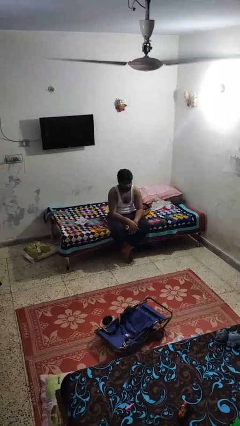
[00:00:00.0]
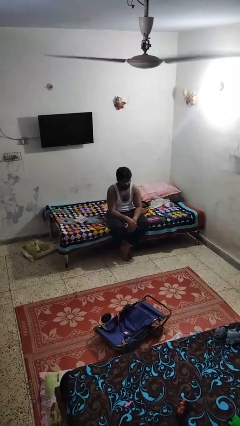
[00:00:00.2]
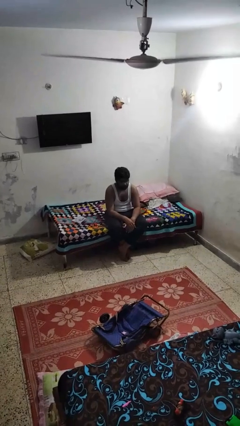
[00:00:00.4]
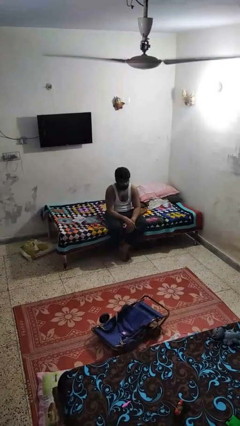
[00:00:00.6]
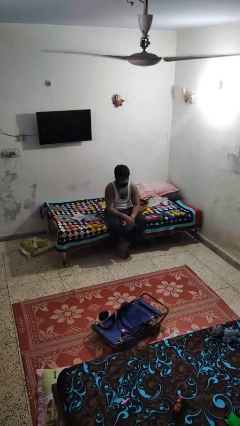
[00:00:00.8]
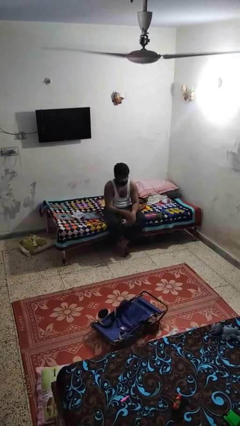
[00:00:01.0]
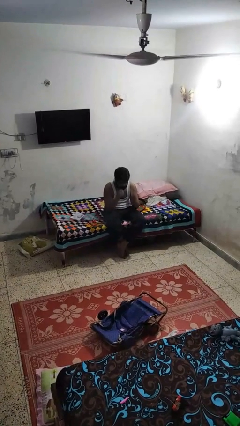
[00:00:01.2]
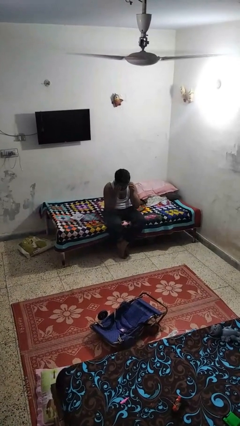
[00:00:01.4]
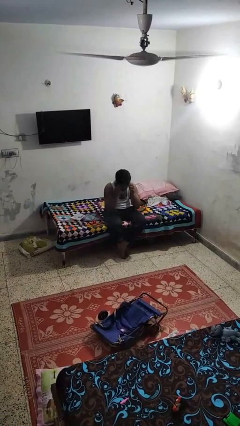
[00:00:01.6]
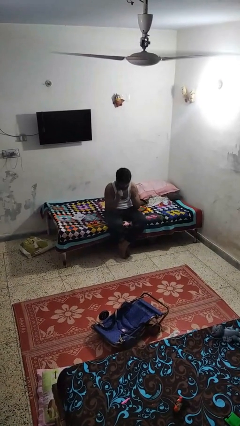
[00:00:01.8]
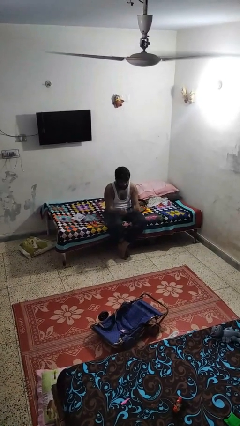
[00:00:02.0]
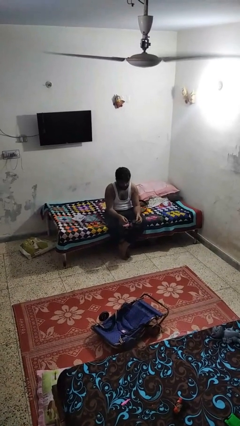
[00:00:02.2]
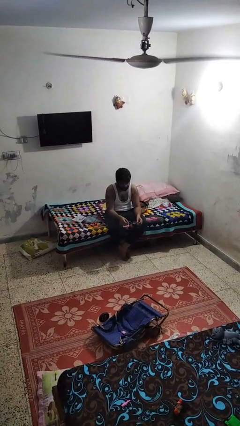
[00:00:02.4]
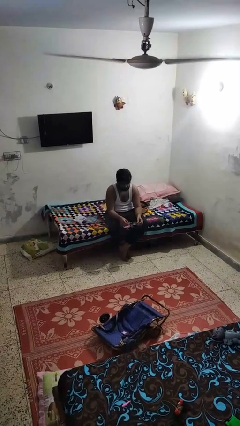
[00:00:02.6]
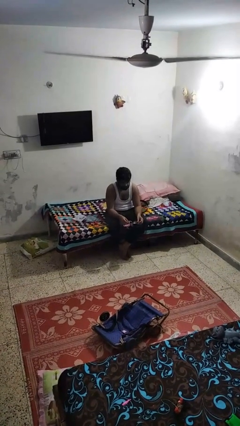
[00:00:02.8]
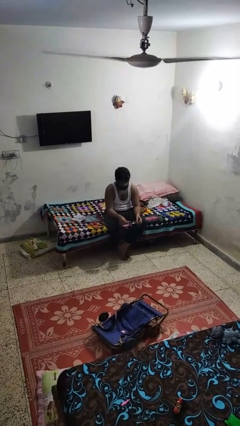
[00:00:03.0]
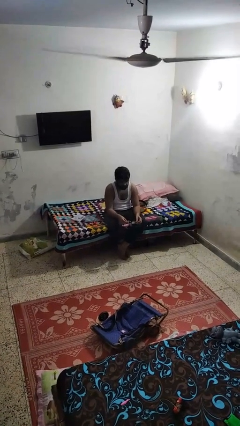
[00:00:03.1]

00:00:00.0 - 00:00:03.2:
person takes off glasses

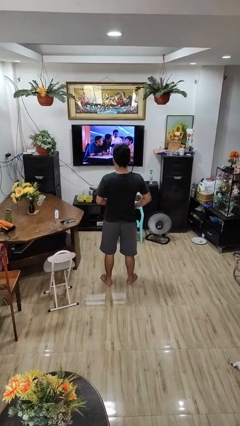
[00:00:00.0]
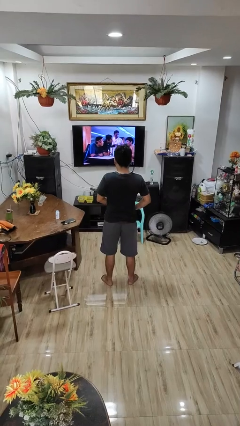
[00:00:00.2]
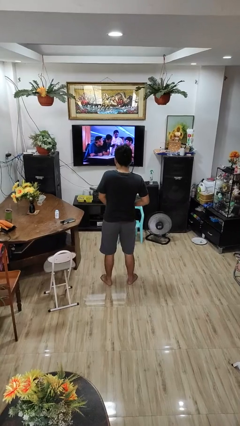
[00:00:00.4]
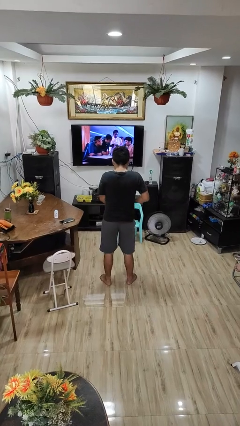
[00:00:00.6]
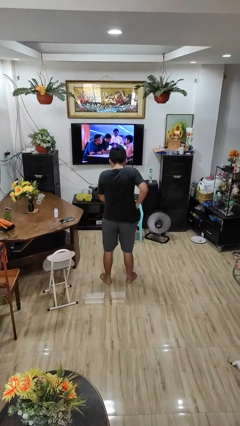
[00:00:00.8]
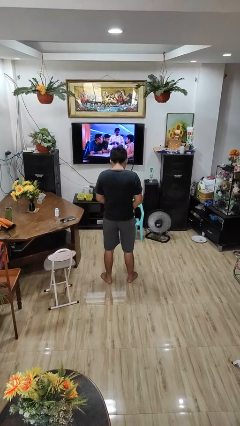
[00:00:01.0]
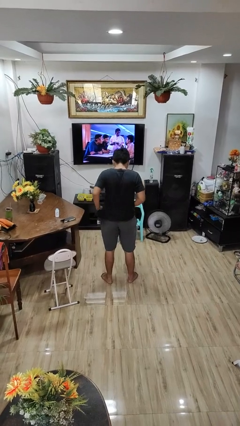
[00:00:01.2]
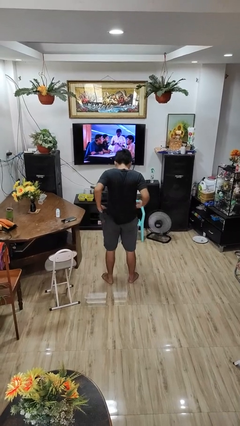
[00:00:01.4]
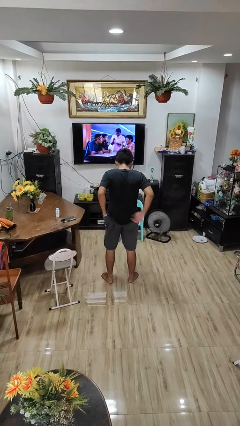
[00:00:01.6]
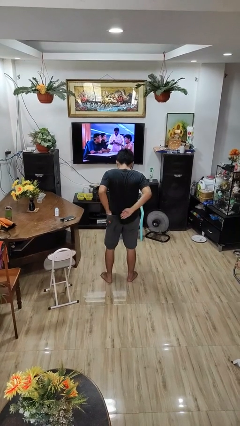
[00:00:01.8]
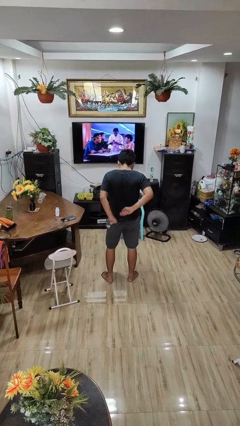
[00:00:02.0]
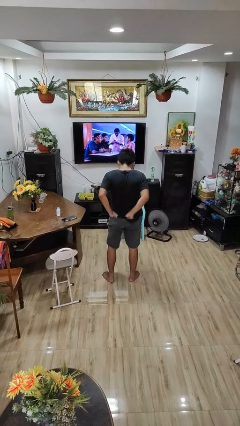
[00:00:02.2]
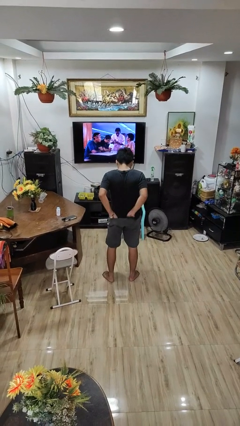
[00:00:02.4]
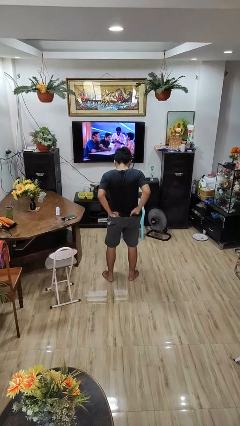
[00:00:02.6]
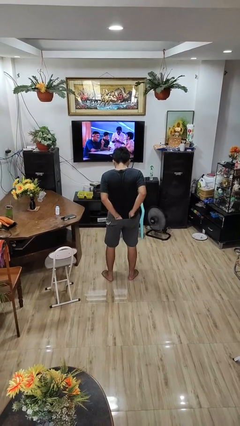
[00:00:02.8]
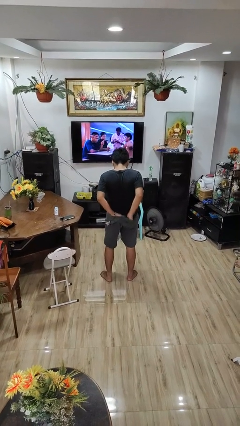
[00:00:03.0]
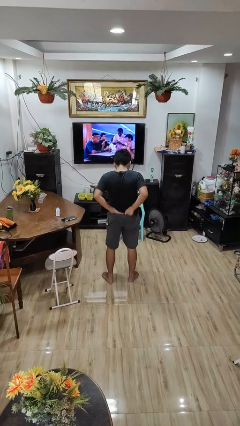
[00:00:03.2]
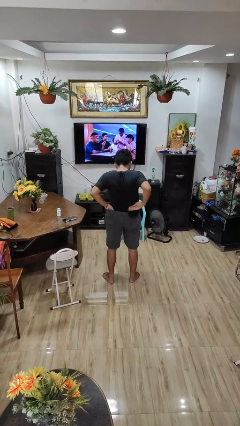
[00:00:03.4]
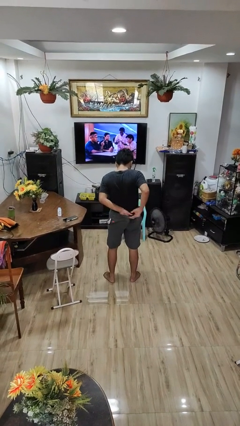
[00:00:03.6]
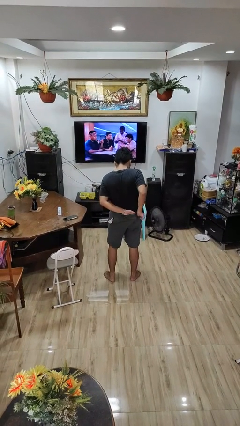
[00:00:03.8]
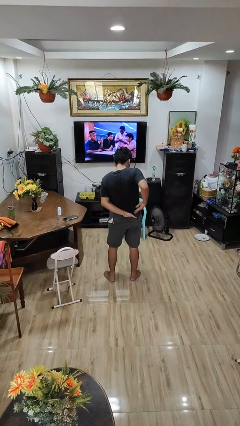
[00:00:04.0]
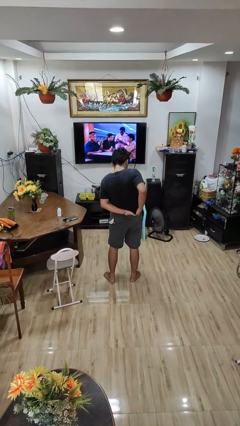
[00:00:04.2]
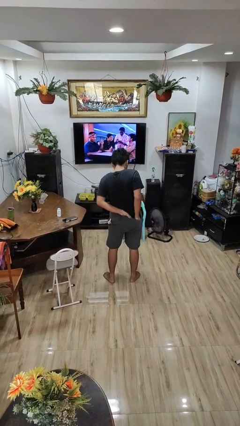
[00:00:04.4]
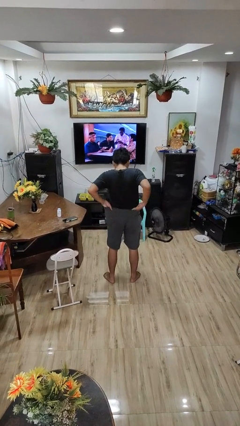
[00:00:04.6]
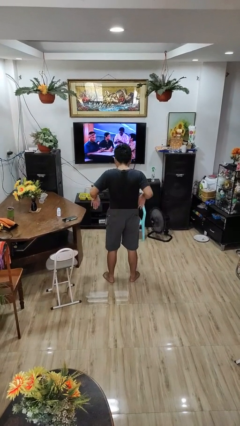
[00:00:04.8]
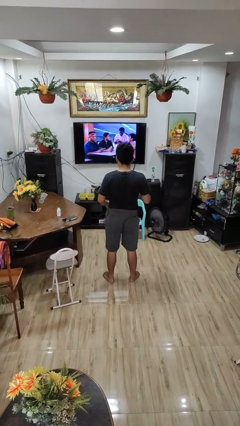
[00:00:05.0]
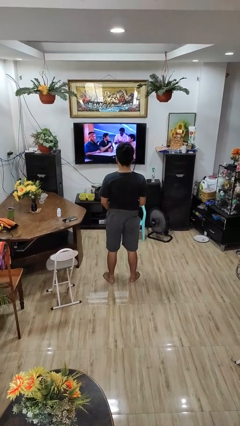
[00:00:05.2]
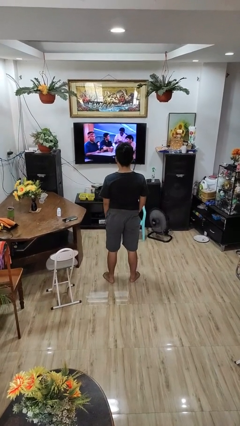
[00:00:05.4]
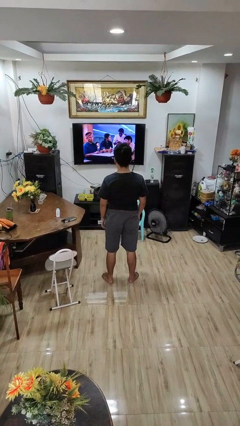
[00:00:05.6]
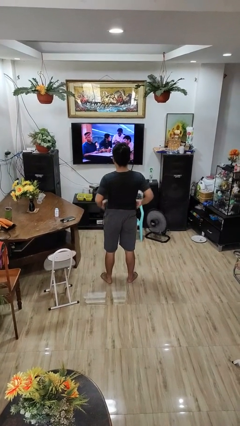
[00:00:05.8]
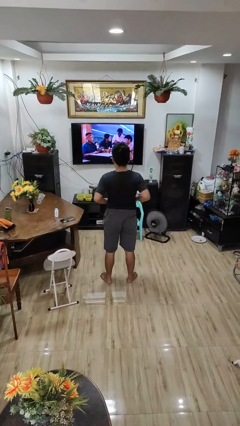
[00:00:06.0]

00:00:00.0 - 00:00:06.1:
person tucks in shirt

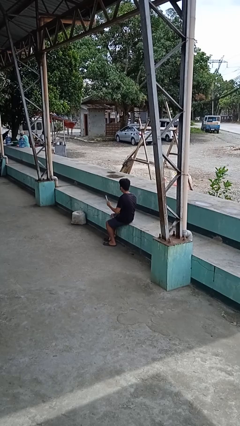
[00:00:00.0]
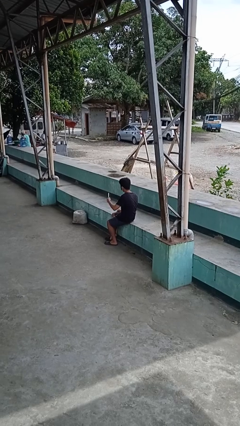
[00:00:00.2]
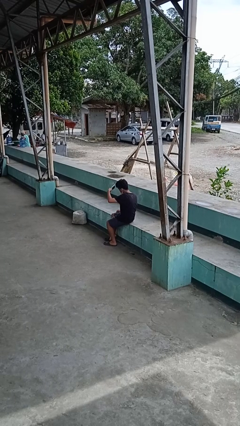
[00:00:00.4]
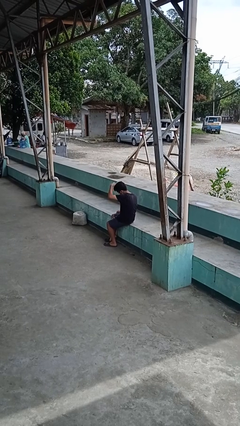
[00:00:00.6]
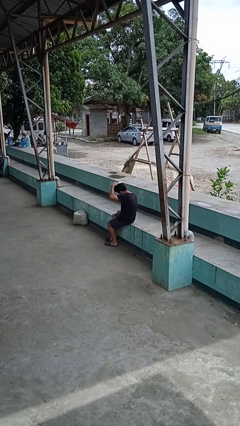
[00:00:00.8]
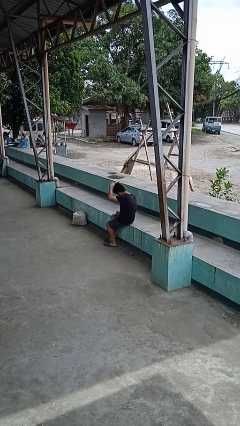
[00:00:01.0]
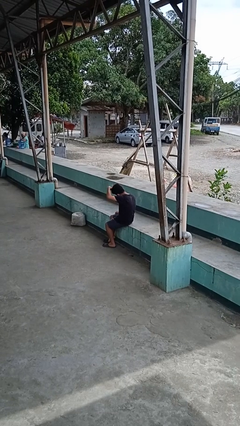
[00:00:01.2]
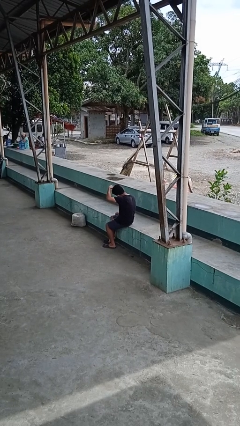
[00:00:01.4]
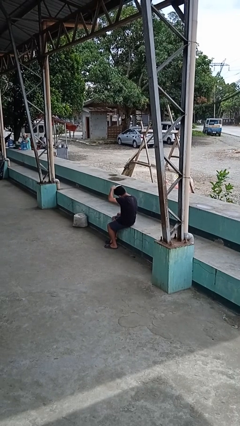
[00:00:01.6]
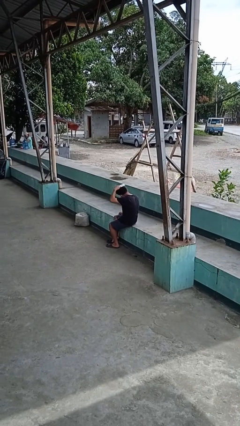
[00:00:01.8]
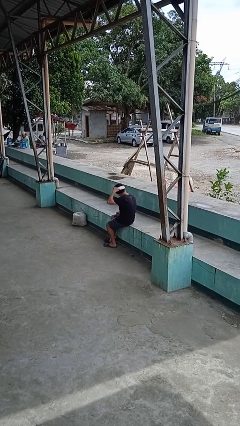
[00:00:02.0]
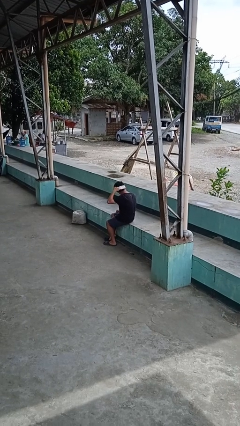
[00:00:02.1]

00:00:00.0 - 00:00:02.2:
person brushes hair

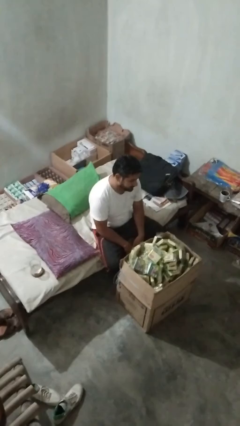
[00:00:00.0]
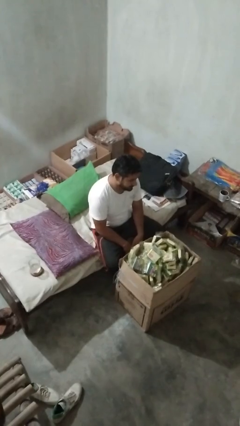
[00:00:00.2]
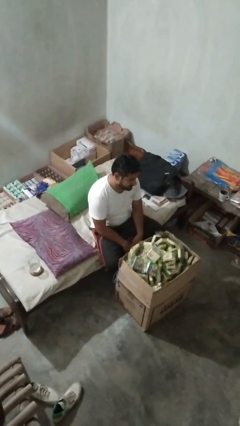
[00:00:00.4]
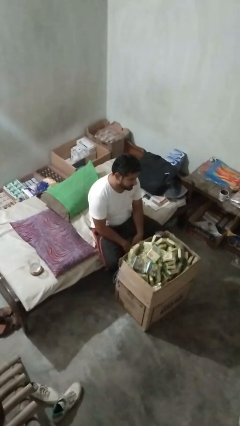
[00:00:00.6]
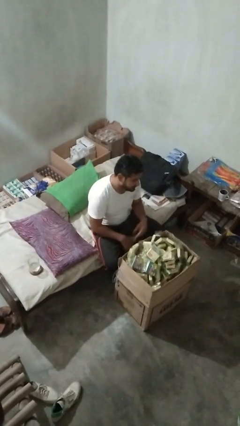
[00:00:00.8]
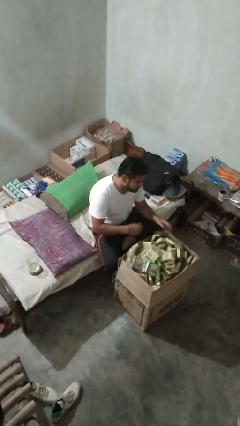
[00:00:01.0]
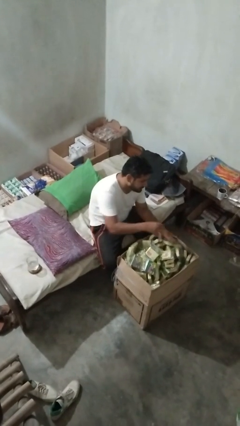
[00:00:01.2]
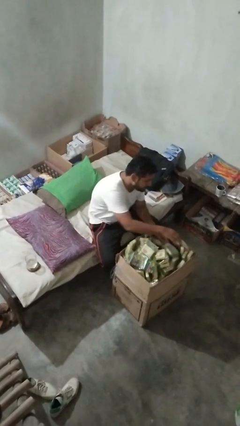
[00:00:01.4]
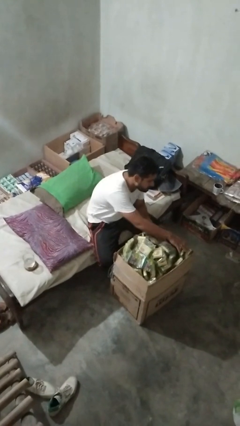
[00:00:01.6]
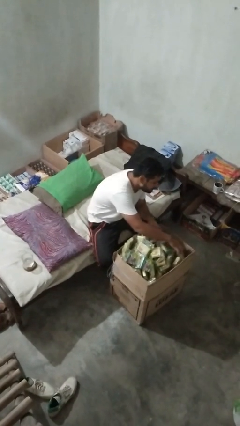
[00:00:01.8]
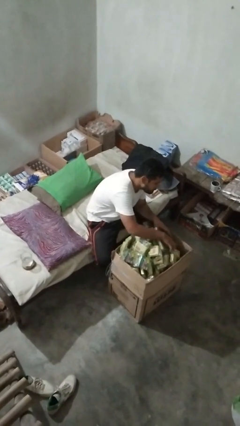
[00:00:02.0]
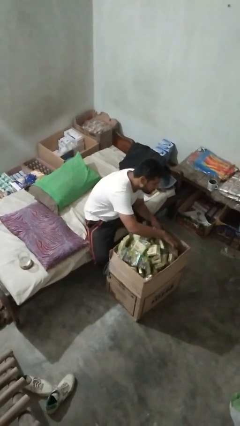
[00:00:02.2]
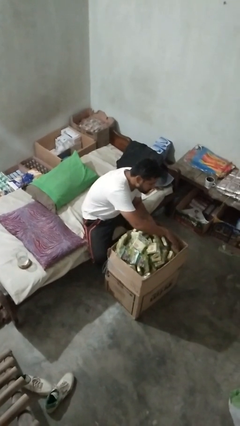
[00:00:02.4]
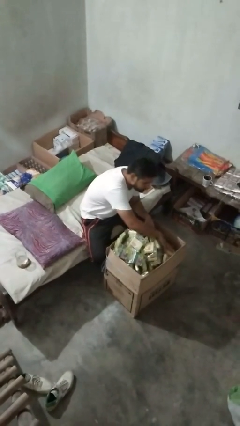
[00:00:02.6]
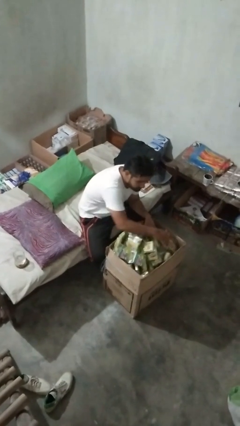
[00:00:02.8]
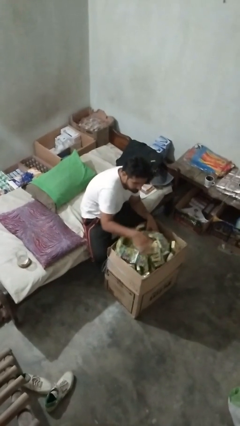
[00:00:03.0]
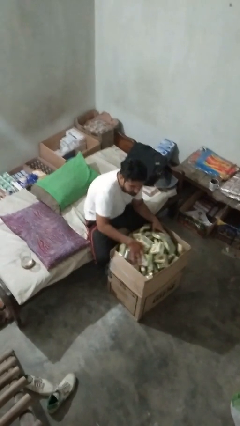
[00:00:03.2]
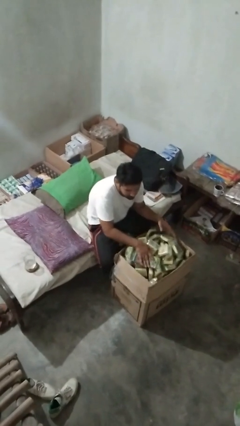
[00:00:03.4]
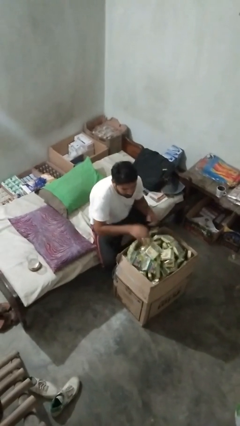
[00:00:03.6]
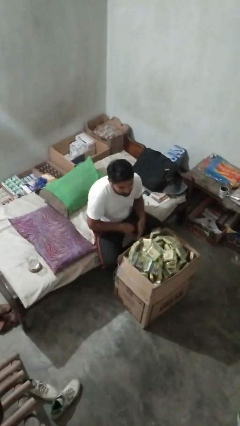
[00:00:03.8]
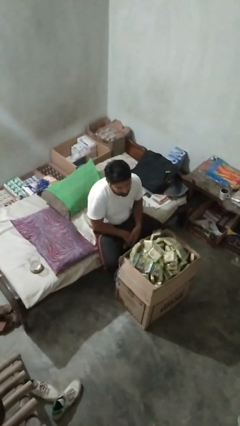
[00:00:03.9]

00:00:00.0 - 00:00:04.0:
person searches in box

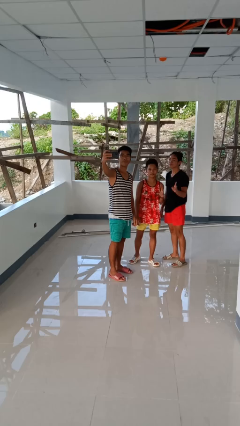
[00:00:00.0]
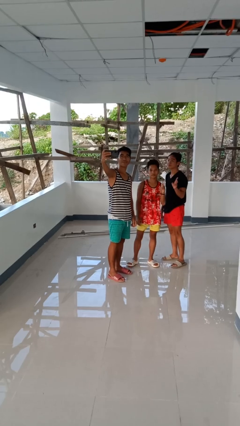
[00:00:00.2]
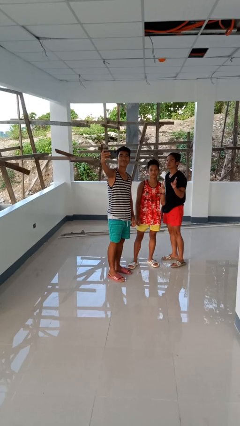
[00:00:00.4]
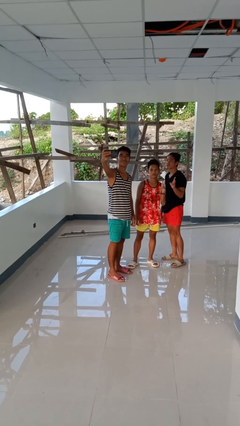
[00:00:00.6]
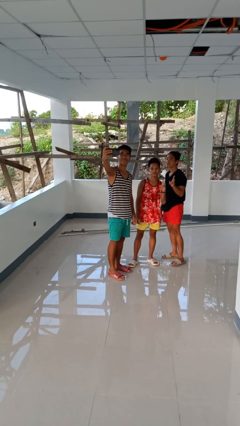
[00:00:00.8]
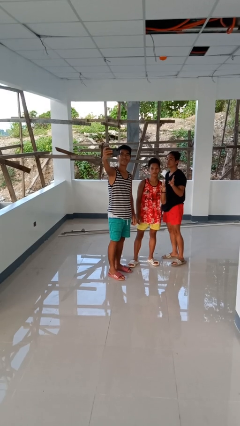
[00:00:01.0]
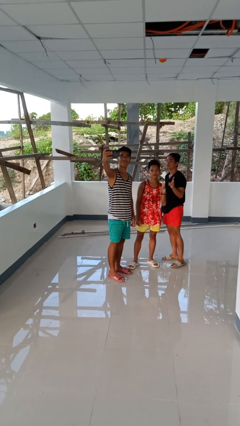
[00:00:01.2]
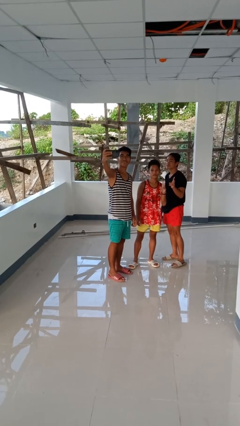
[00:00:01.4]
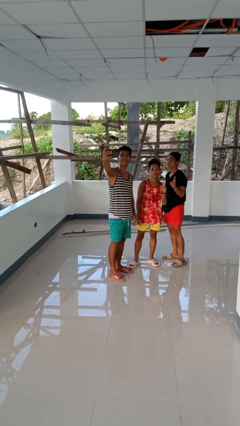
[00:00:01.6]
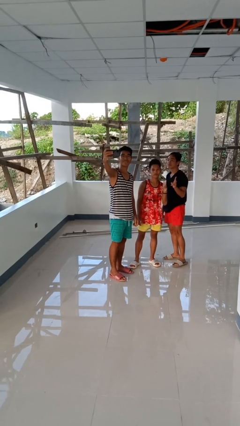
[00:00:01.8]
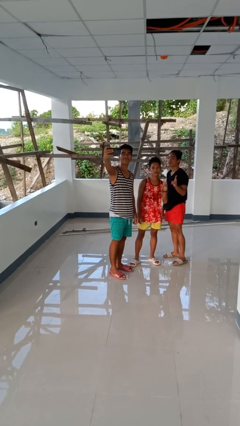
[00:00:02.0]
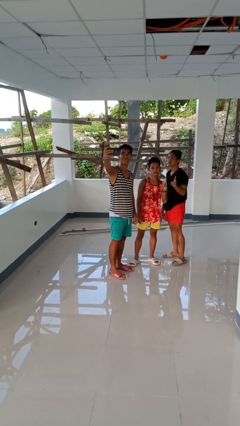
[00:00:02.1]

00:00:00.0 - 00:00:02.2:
person takes selfie with person
